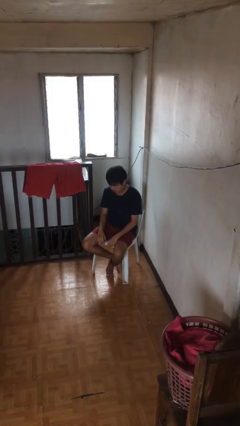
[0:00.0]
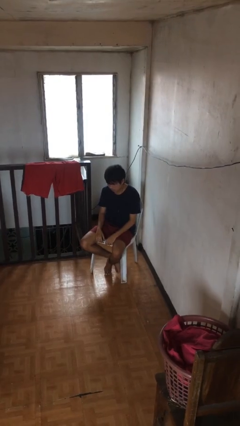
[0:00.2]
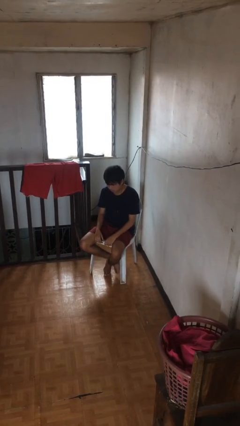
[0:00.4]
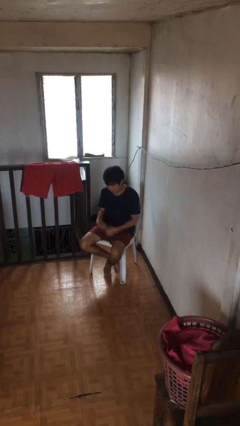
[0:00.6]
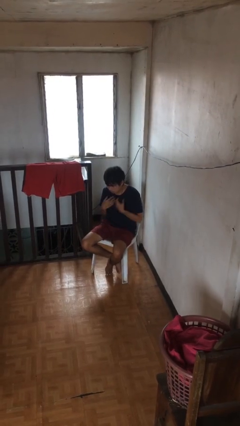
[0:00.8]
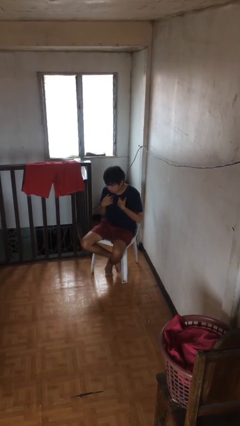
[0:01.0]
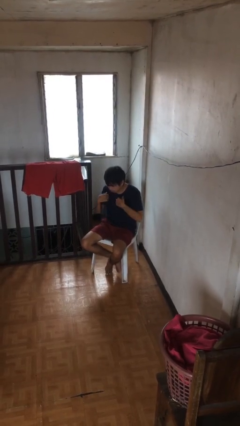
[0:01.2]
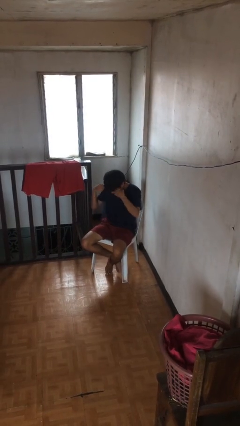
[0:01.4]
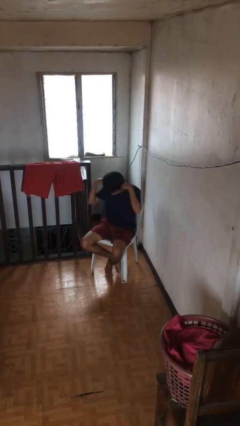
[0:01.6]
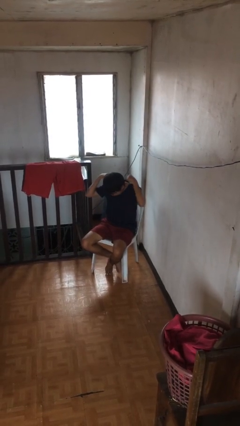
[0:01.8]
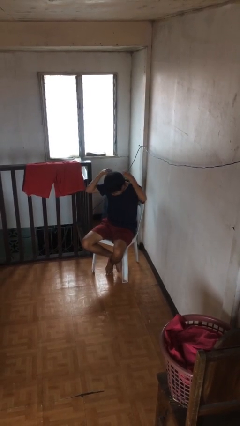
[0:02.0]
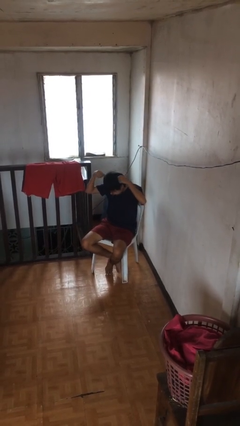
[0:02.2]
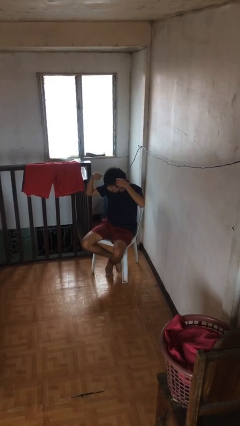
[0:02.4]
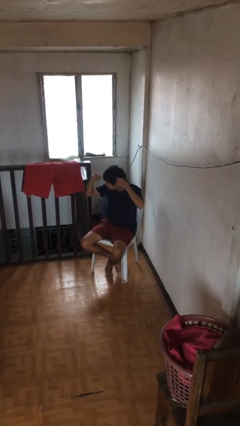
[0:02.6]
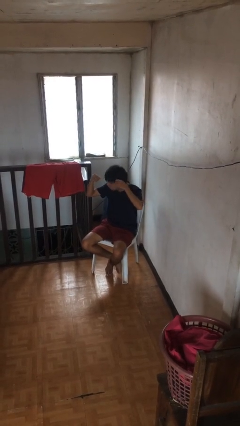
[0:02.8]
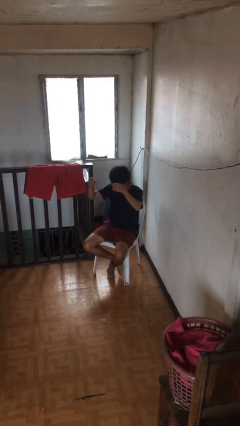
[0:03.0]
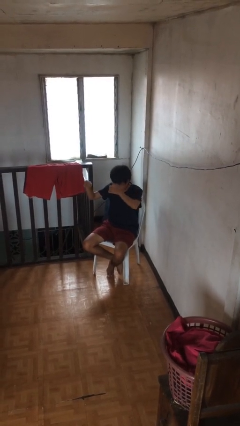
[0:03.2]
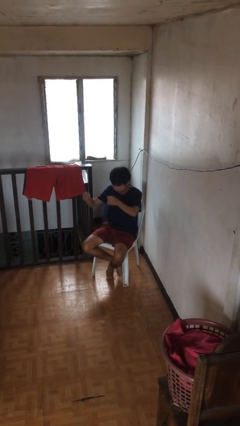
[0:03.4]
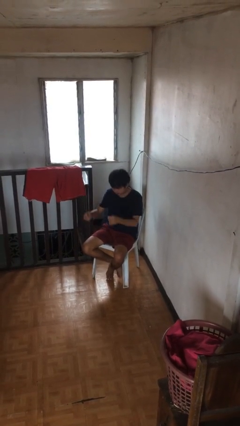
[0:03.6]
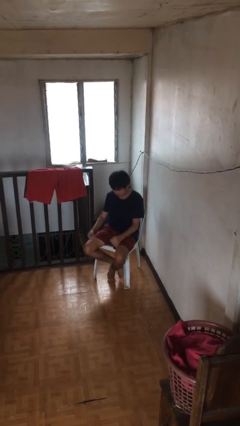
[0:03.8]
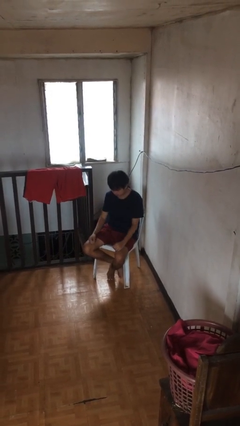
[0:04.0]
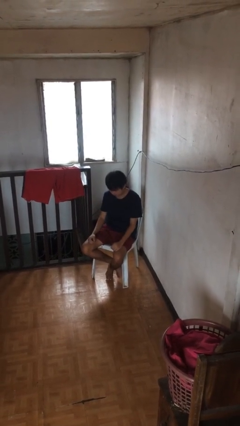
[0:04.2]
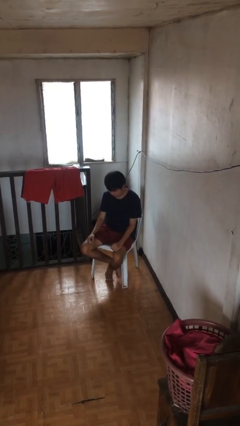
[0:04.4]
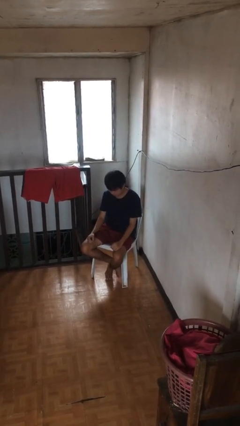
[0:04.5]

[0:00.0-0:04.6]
person takes off necklace

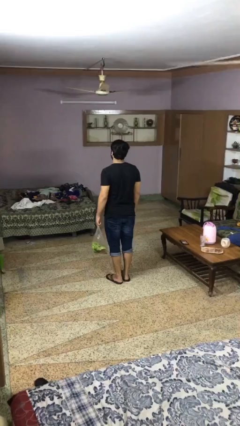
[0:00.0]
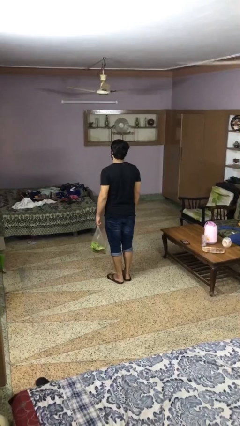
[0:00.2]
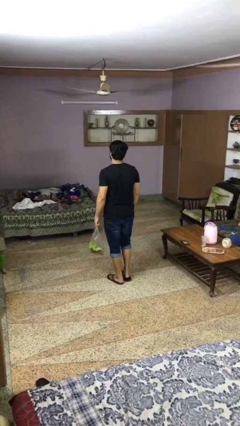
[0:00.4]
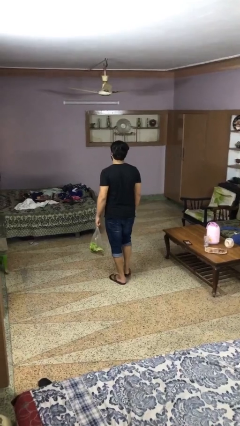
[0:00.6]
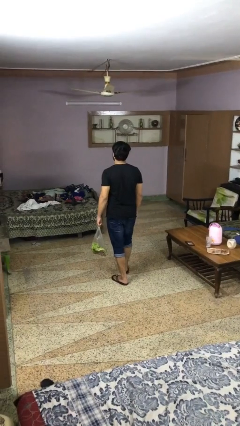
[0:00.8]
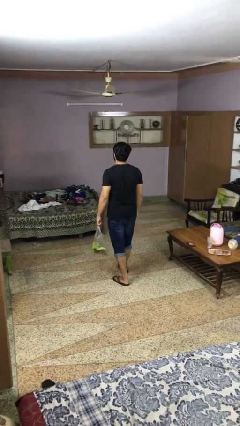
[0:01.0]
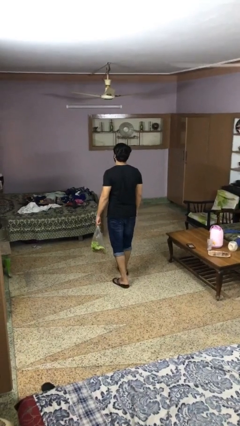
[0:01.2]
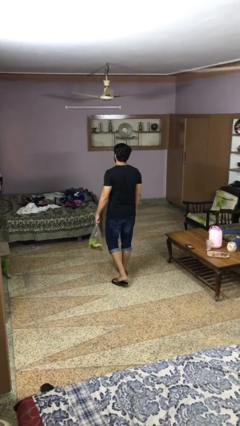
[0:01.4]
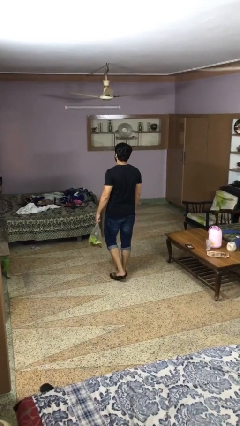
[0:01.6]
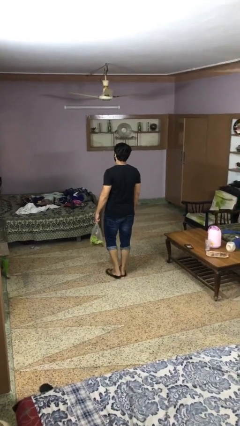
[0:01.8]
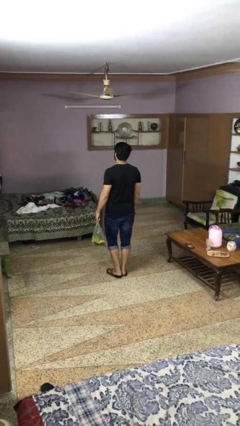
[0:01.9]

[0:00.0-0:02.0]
person carries groceries

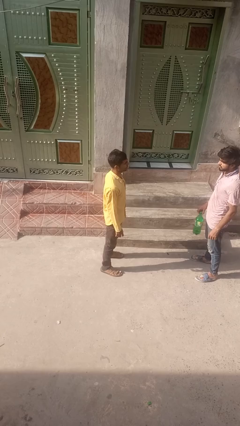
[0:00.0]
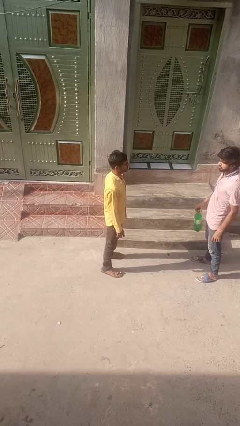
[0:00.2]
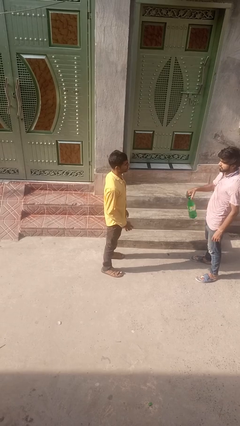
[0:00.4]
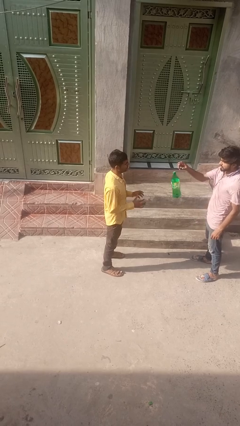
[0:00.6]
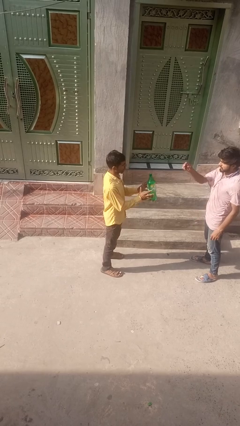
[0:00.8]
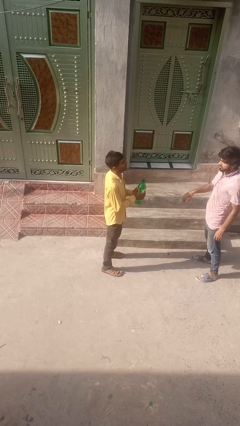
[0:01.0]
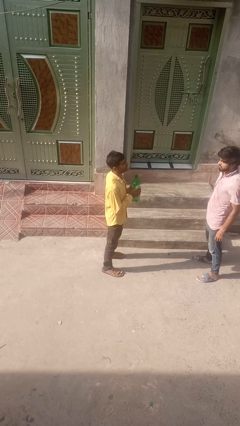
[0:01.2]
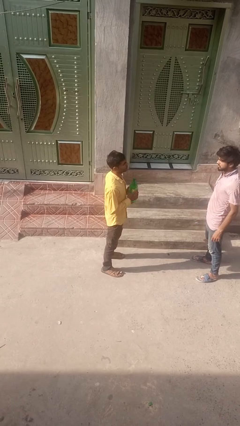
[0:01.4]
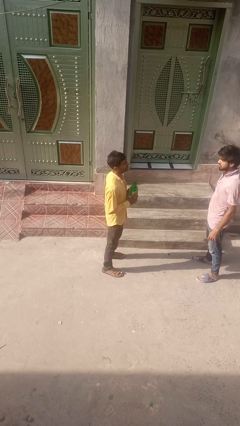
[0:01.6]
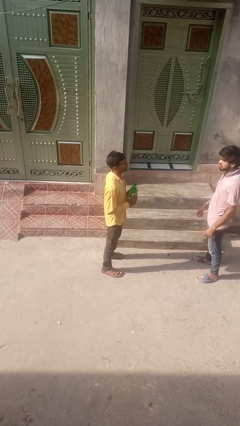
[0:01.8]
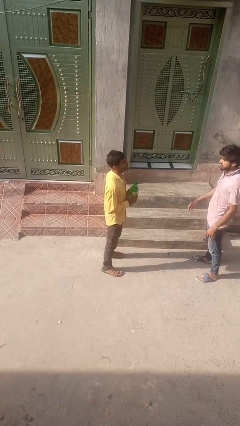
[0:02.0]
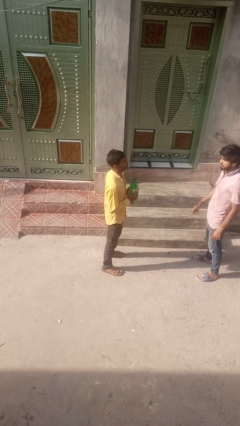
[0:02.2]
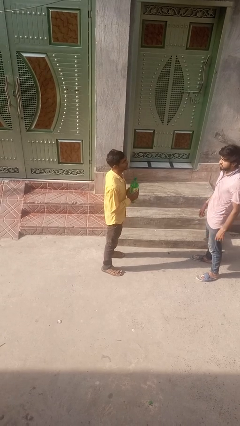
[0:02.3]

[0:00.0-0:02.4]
person catches object from person

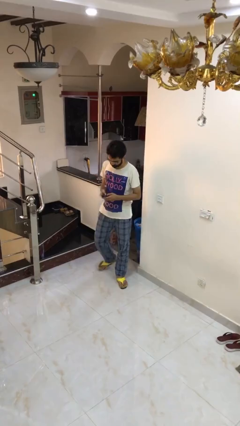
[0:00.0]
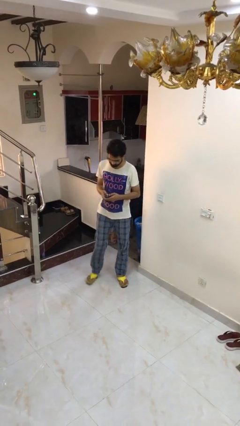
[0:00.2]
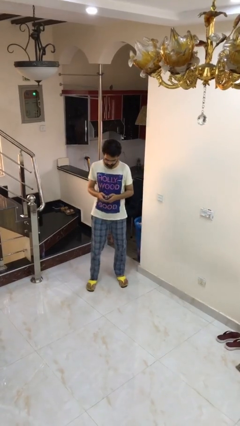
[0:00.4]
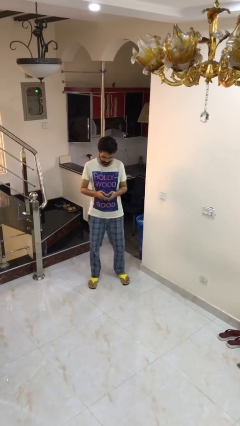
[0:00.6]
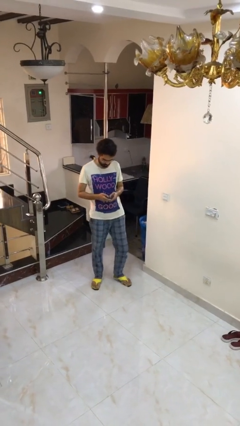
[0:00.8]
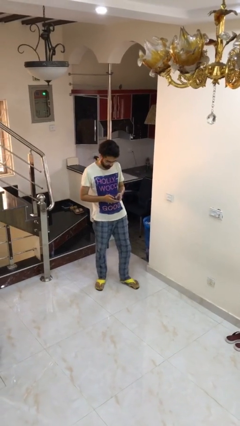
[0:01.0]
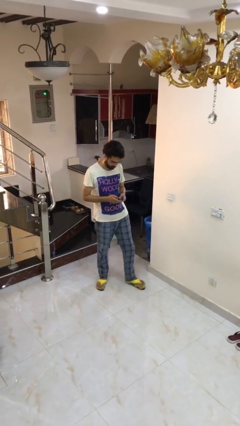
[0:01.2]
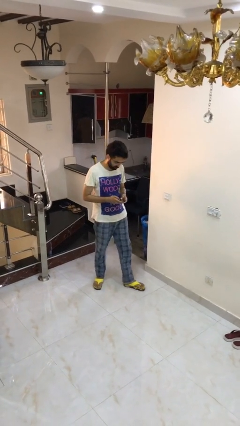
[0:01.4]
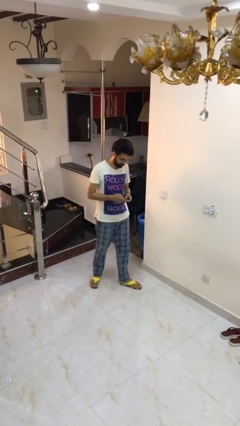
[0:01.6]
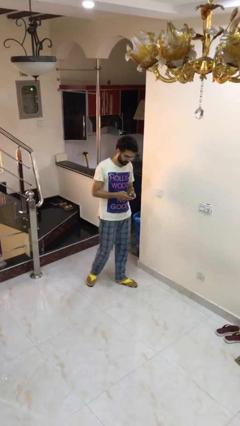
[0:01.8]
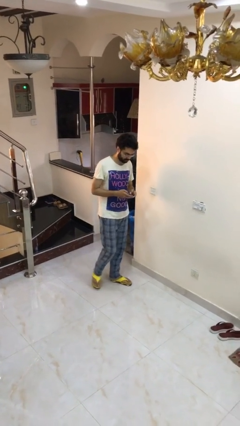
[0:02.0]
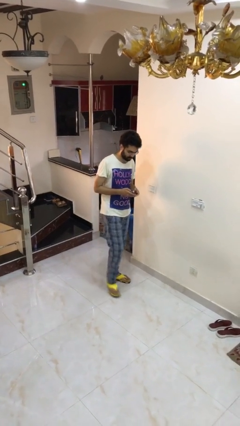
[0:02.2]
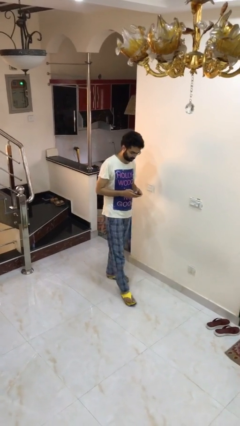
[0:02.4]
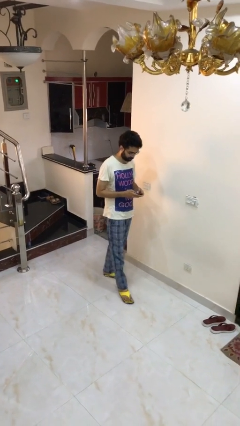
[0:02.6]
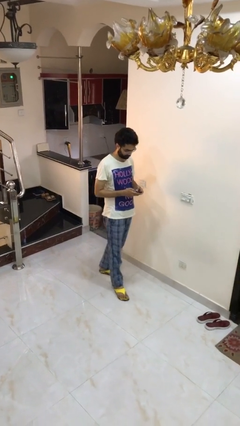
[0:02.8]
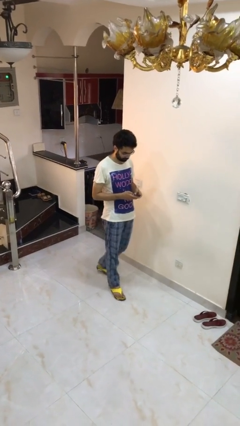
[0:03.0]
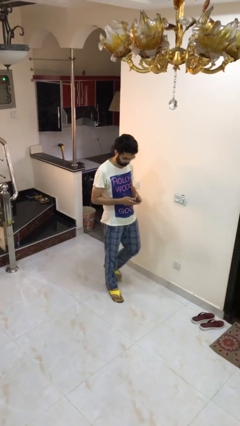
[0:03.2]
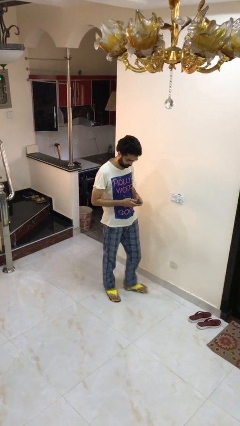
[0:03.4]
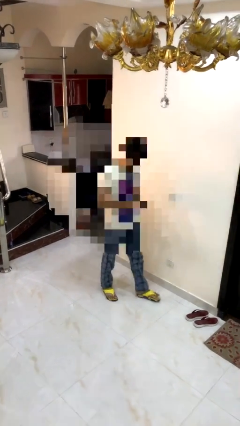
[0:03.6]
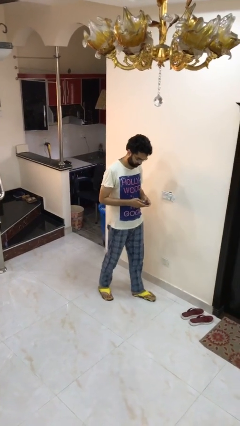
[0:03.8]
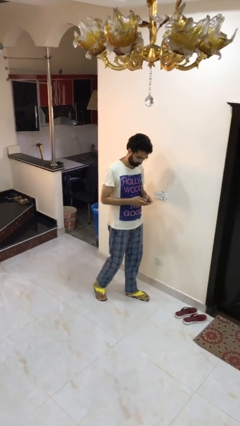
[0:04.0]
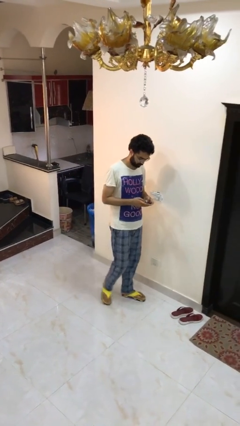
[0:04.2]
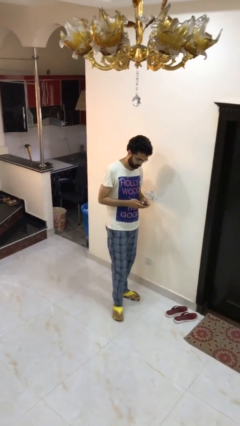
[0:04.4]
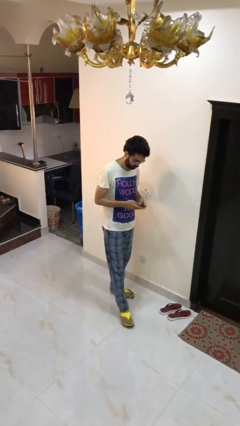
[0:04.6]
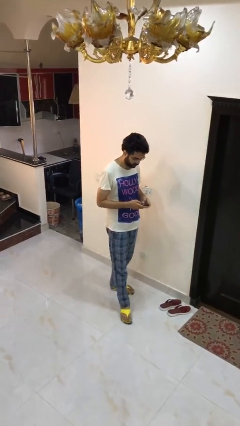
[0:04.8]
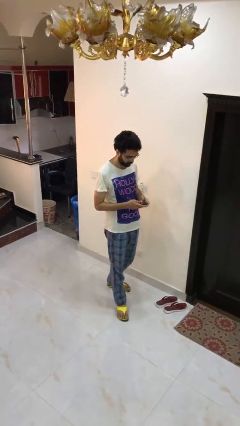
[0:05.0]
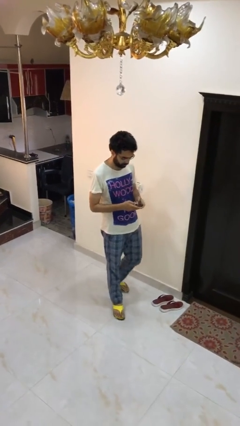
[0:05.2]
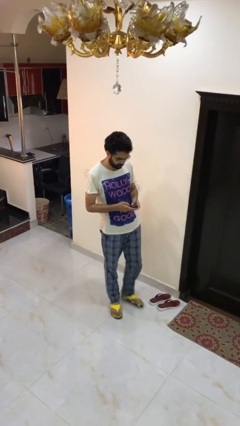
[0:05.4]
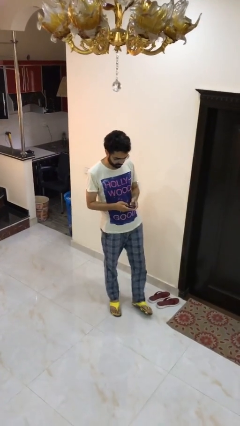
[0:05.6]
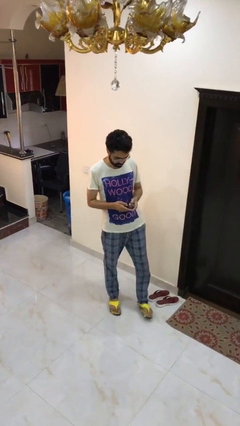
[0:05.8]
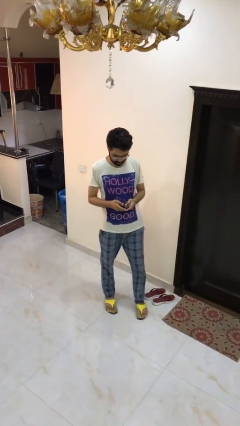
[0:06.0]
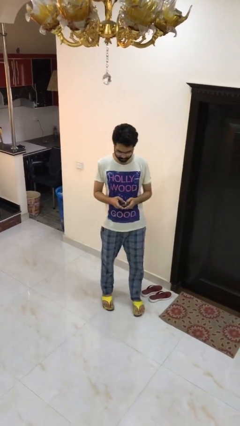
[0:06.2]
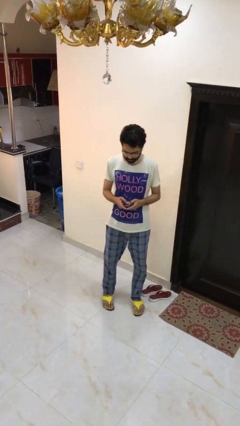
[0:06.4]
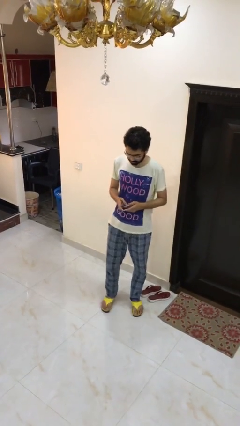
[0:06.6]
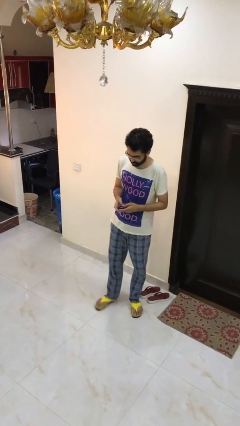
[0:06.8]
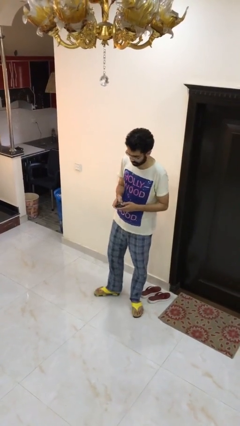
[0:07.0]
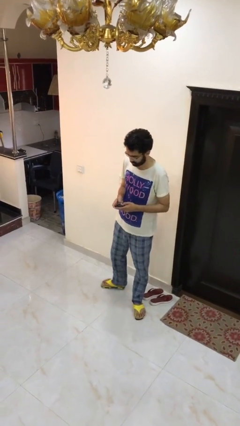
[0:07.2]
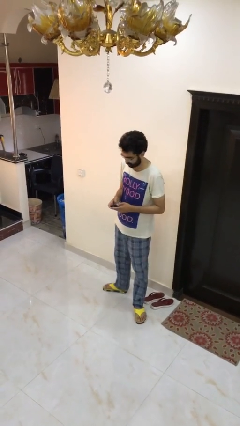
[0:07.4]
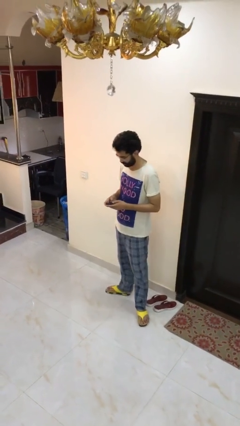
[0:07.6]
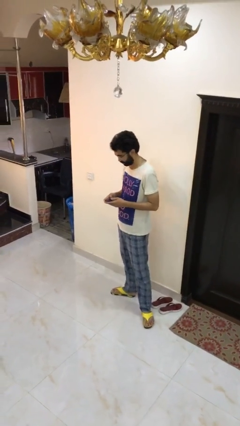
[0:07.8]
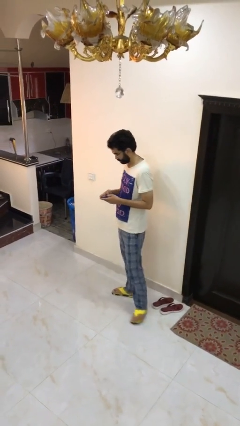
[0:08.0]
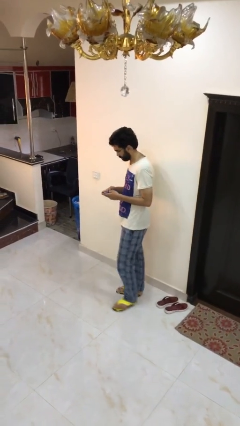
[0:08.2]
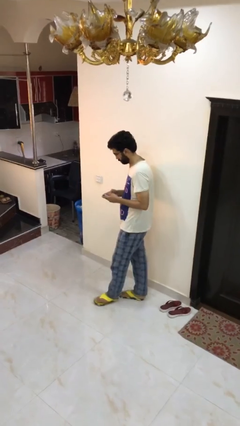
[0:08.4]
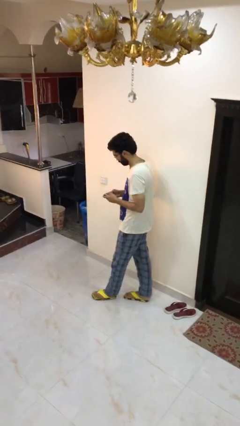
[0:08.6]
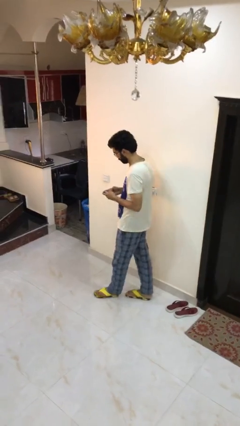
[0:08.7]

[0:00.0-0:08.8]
person texts on phone
